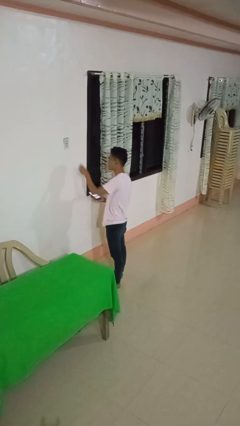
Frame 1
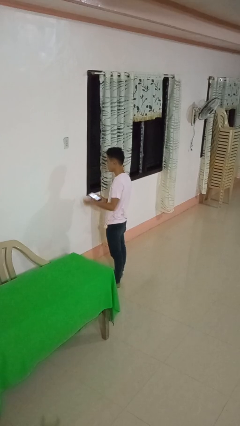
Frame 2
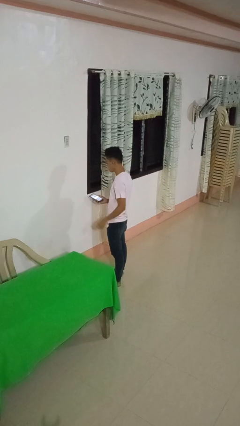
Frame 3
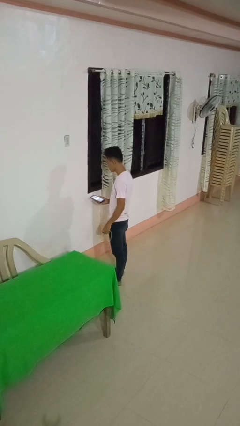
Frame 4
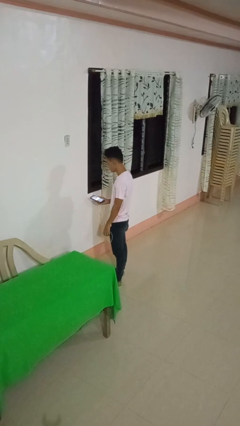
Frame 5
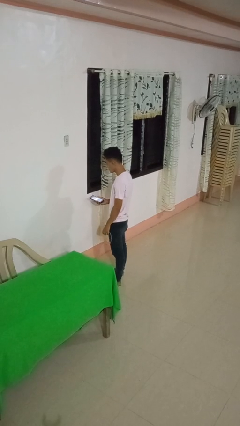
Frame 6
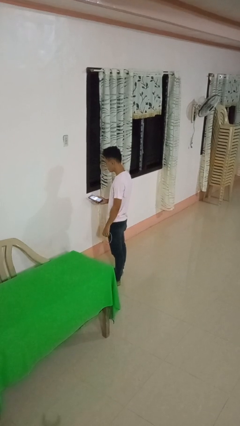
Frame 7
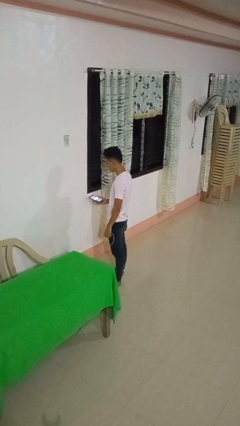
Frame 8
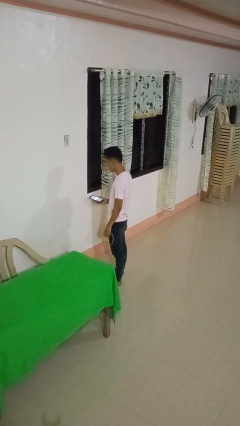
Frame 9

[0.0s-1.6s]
person unplugs from electrical socket

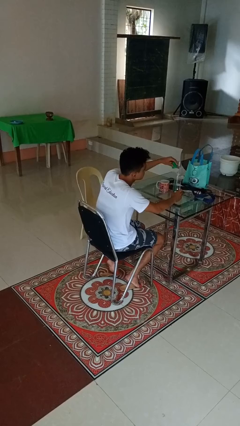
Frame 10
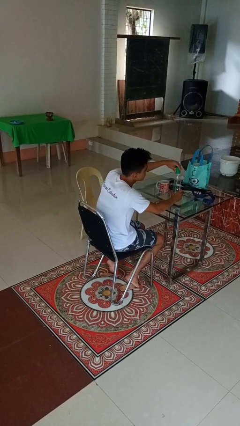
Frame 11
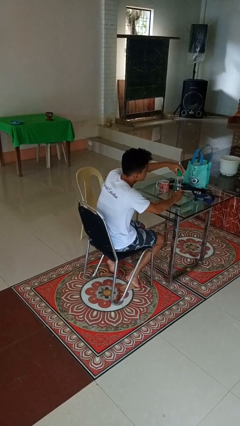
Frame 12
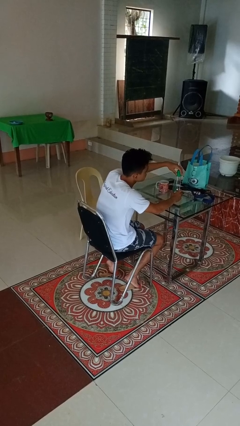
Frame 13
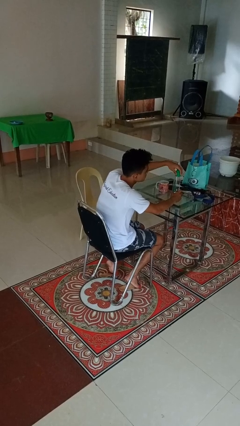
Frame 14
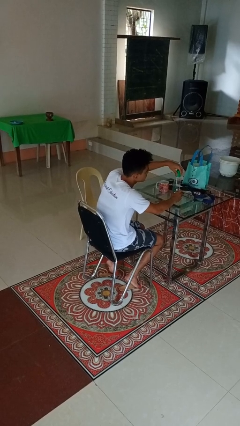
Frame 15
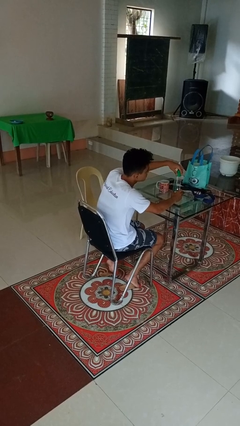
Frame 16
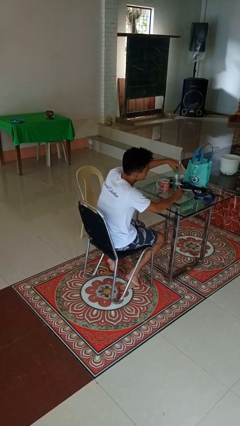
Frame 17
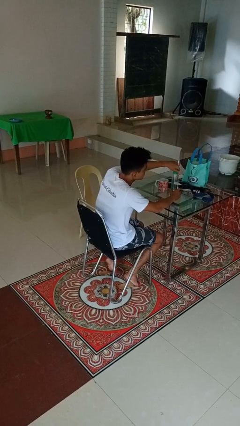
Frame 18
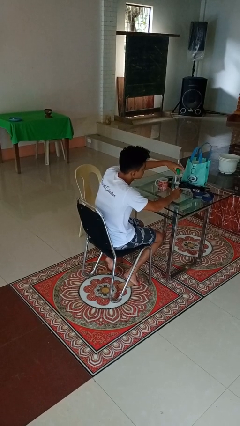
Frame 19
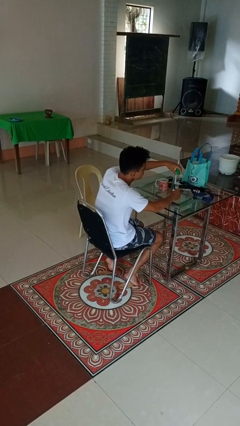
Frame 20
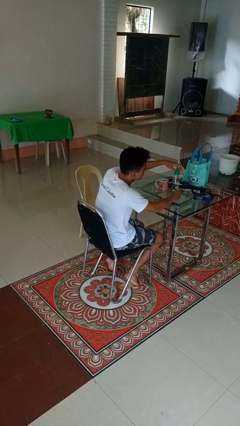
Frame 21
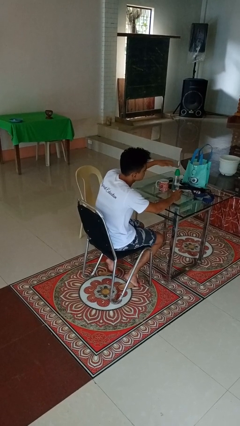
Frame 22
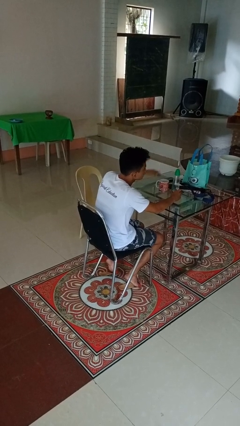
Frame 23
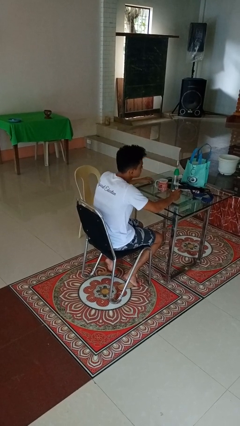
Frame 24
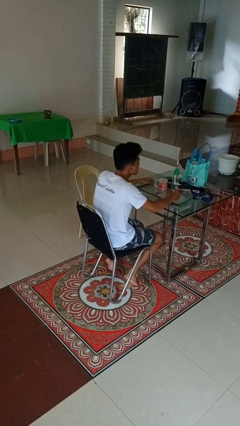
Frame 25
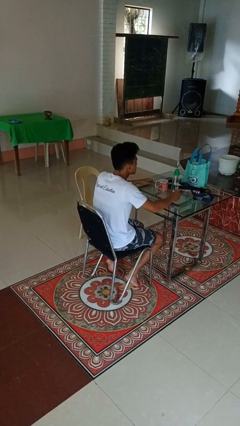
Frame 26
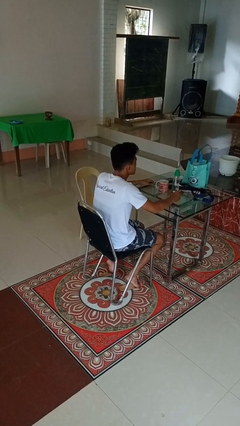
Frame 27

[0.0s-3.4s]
person screws lid to bottle

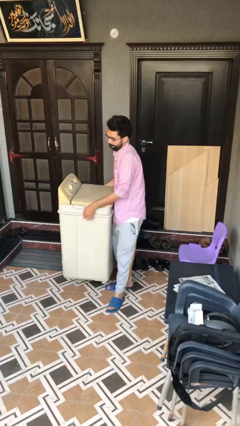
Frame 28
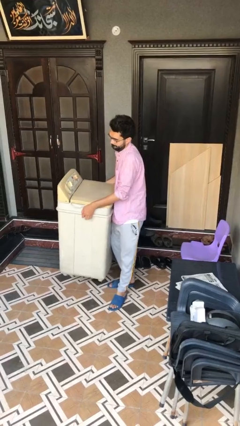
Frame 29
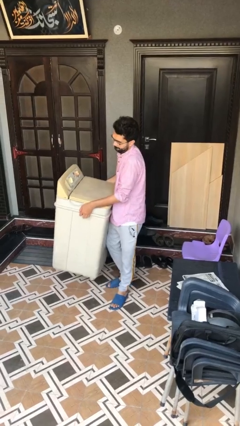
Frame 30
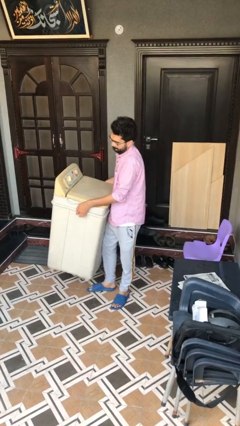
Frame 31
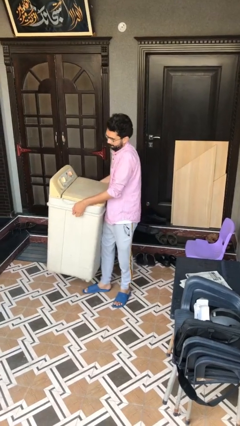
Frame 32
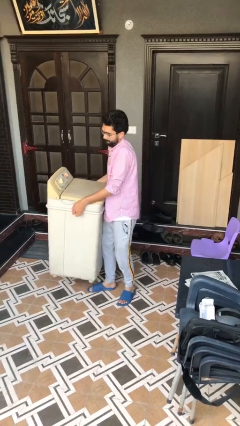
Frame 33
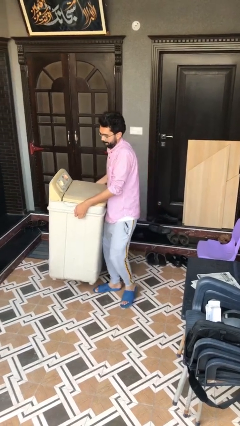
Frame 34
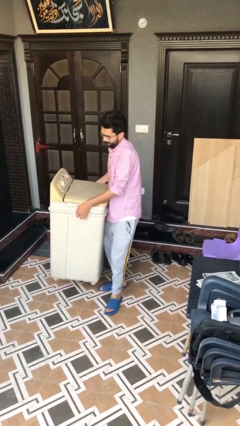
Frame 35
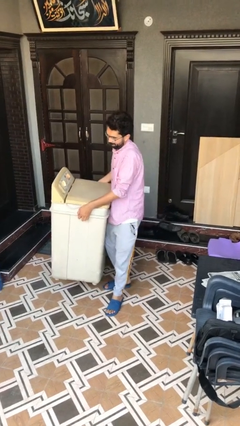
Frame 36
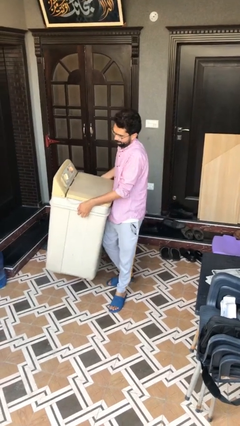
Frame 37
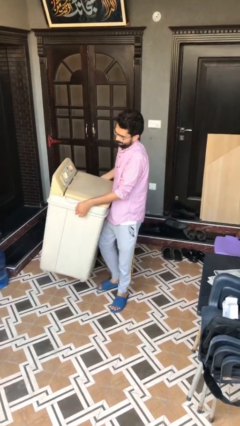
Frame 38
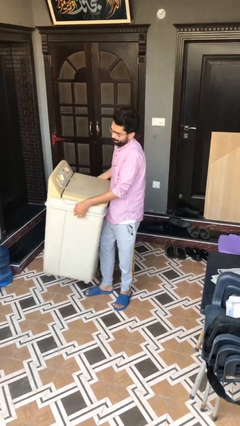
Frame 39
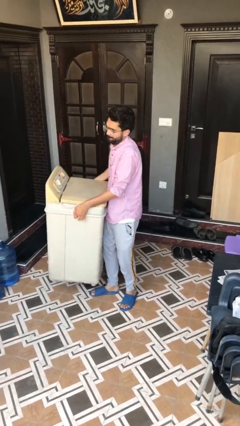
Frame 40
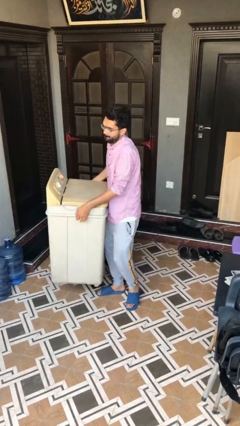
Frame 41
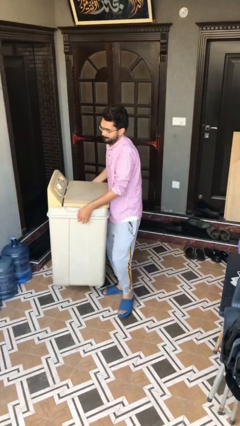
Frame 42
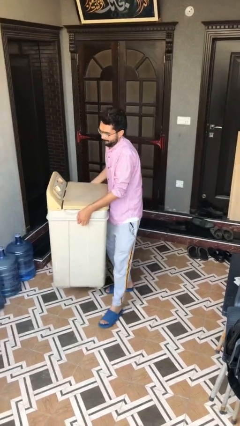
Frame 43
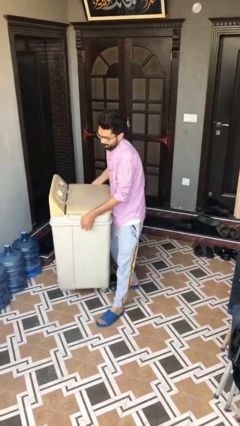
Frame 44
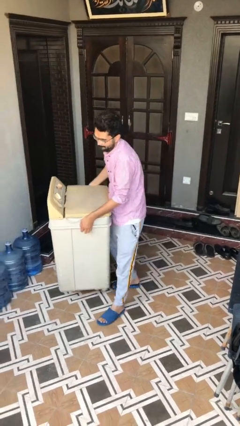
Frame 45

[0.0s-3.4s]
person carries heavy object

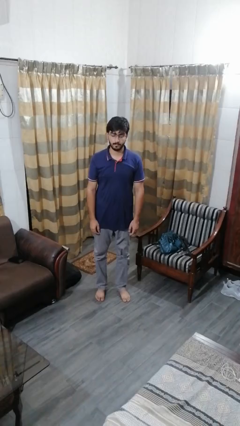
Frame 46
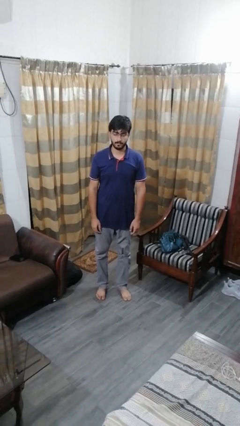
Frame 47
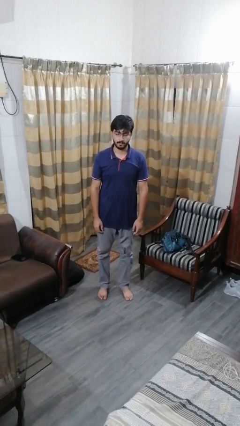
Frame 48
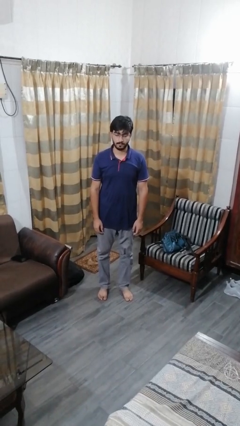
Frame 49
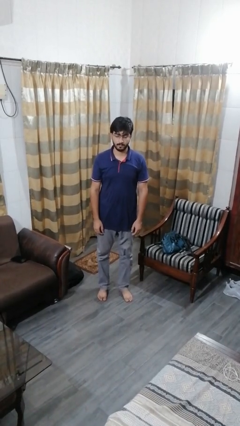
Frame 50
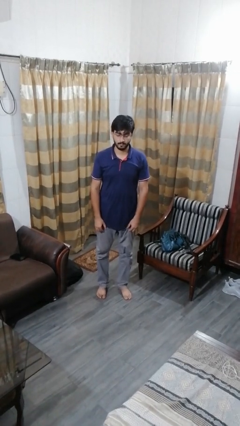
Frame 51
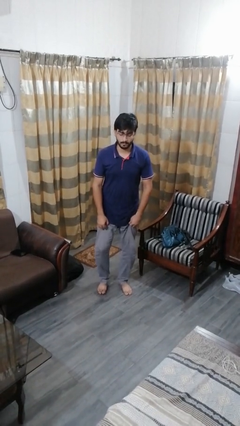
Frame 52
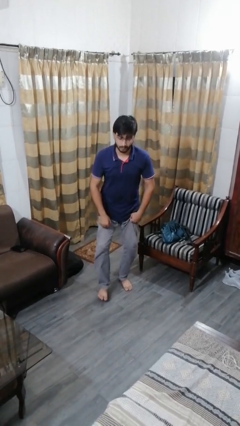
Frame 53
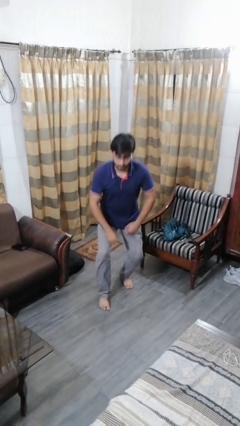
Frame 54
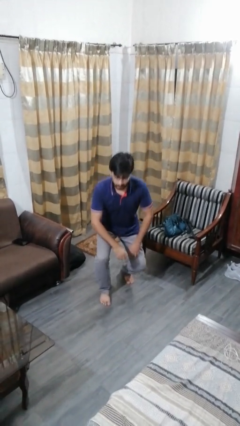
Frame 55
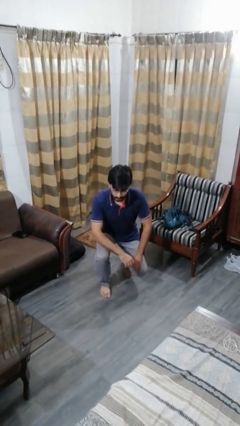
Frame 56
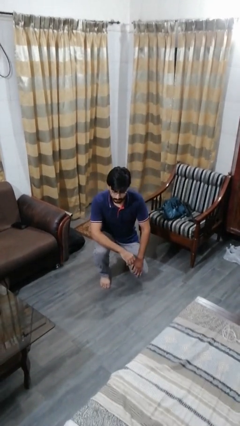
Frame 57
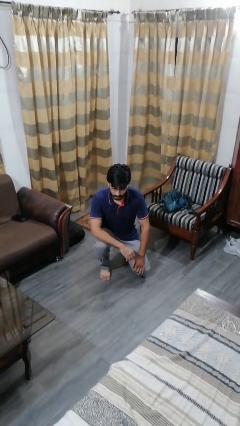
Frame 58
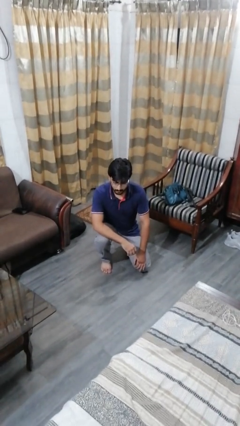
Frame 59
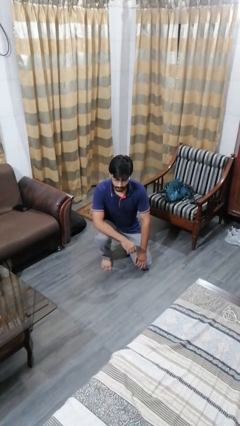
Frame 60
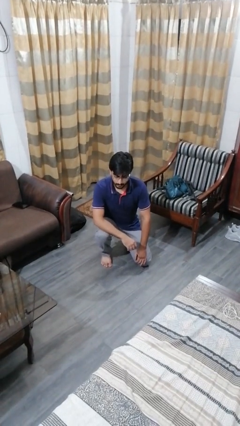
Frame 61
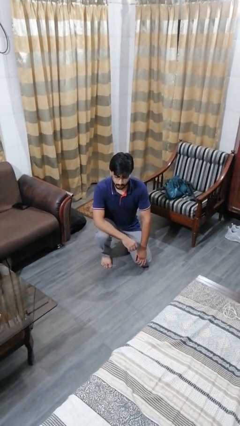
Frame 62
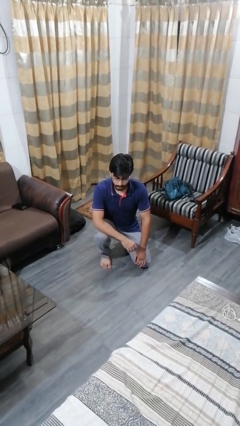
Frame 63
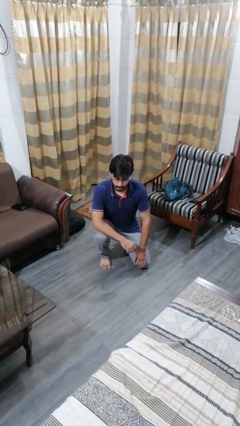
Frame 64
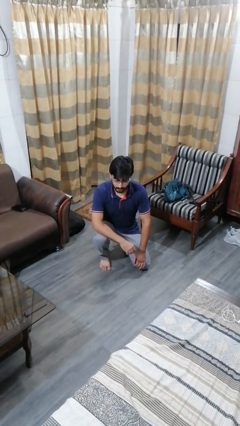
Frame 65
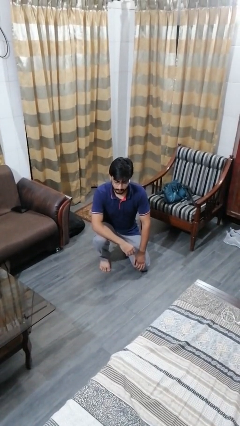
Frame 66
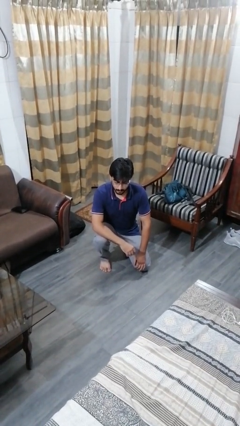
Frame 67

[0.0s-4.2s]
person kneels

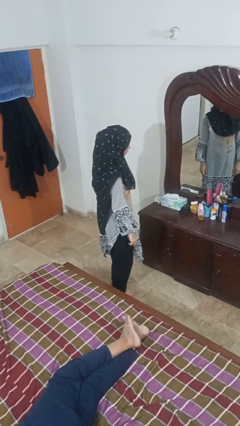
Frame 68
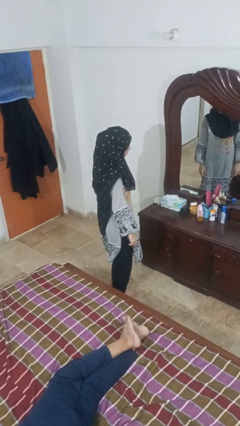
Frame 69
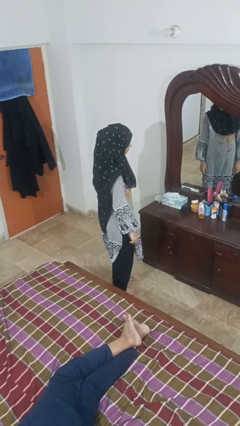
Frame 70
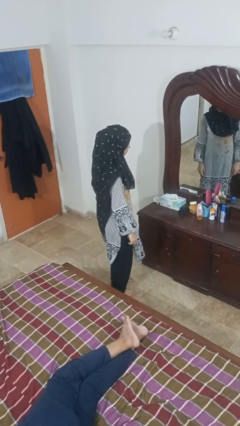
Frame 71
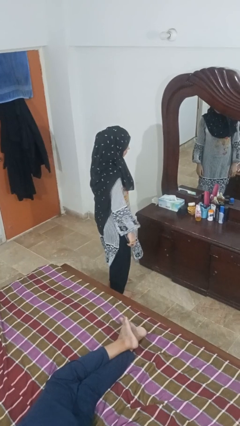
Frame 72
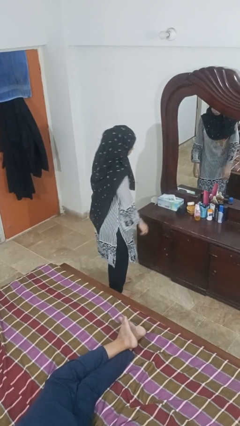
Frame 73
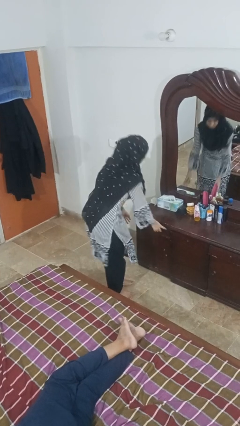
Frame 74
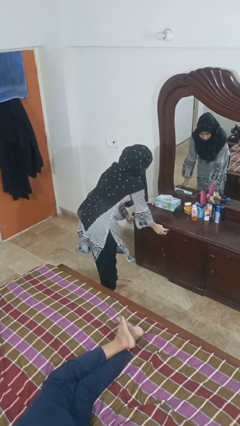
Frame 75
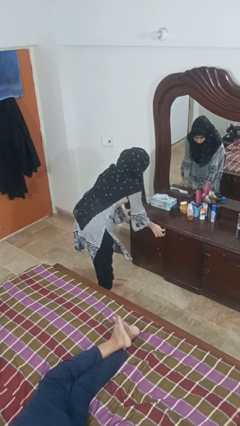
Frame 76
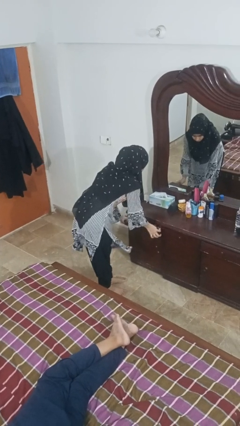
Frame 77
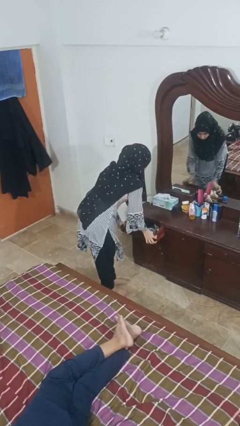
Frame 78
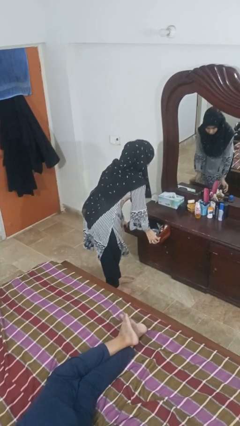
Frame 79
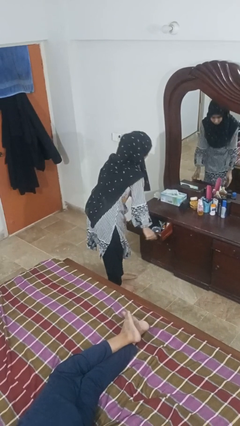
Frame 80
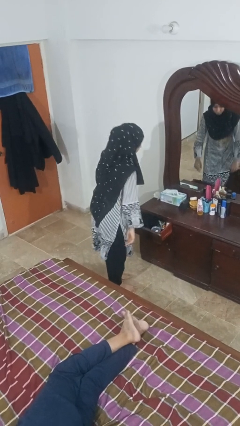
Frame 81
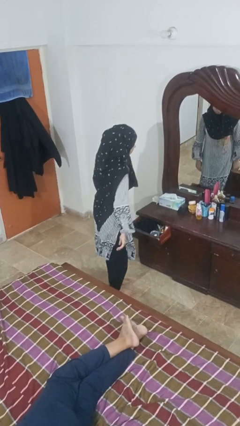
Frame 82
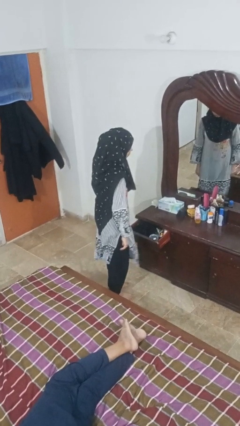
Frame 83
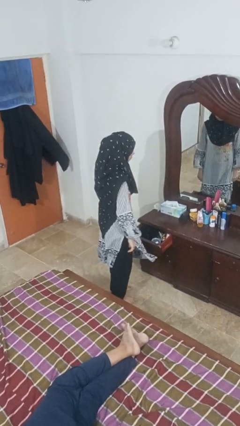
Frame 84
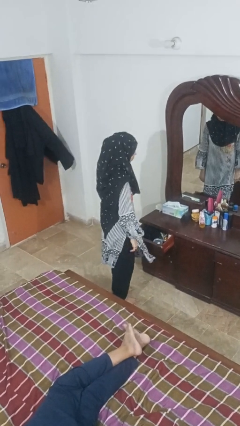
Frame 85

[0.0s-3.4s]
person opens dresser drawer

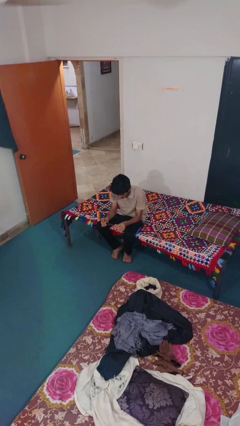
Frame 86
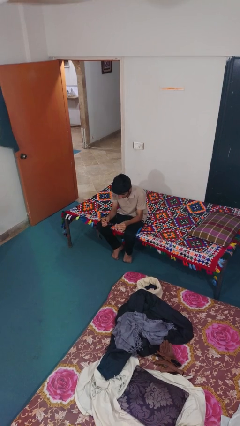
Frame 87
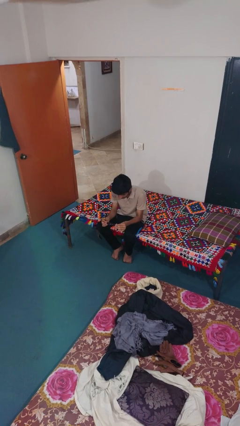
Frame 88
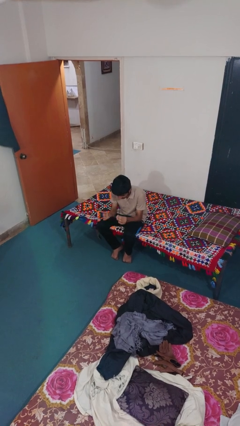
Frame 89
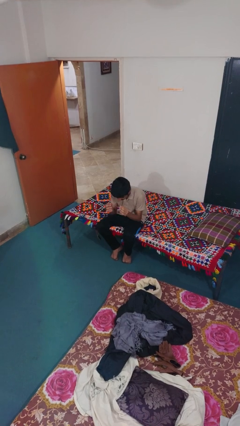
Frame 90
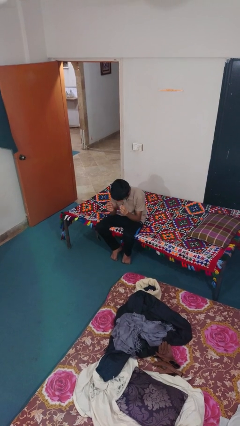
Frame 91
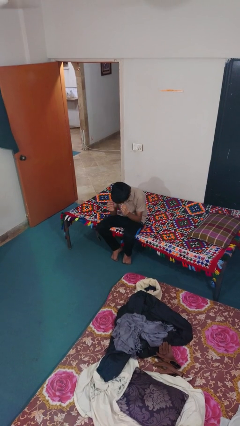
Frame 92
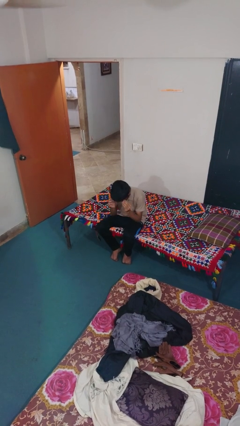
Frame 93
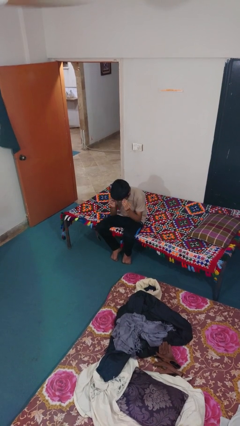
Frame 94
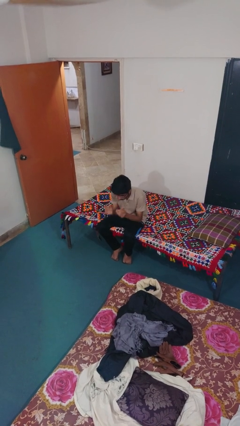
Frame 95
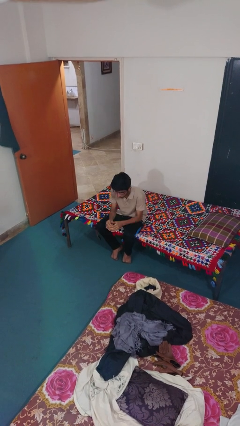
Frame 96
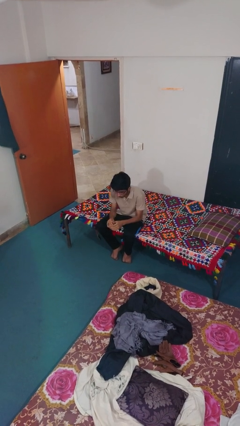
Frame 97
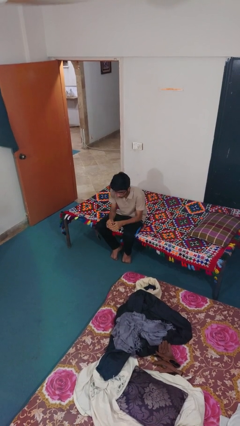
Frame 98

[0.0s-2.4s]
person puts on glasses
